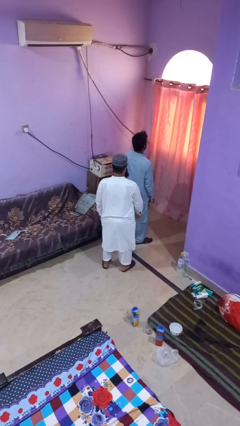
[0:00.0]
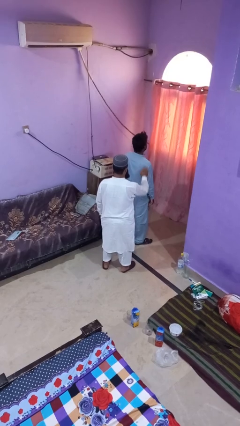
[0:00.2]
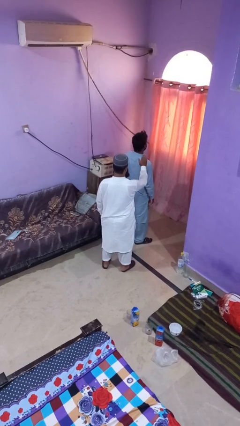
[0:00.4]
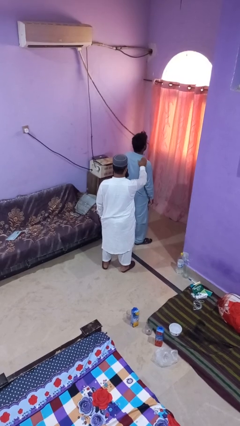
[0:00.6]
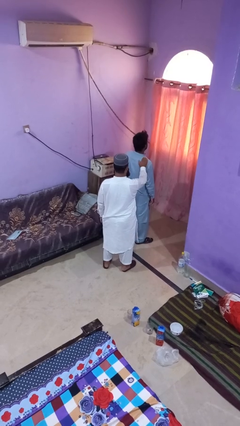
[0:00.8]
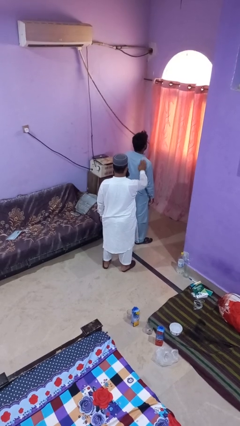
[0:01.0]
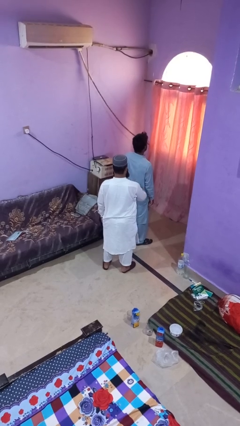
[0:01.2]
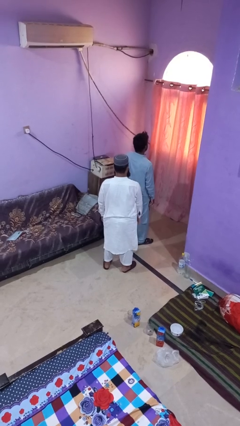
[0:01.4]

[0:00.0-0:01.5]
person pounds shoulders of person

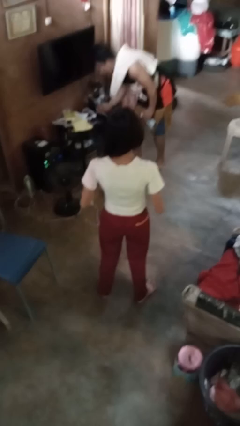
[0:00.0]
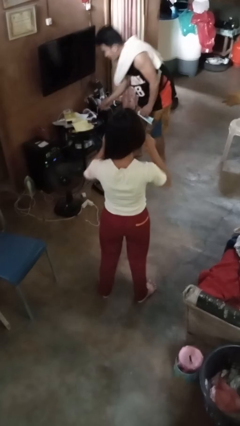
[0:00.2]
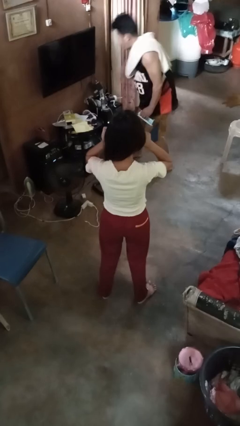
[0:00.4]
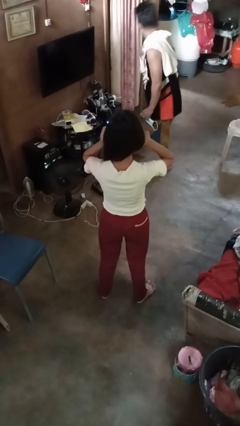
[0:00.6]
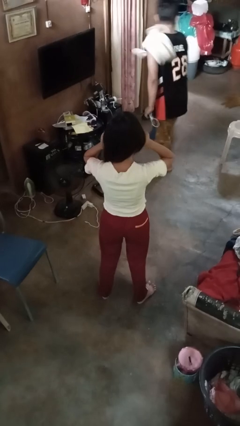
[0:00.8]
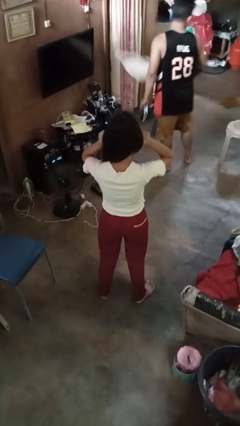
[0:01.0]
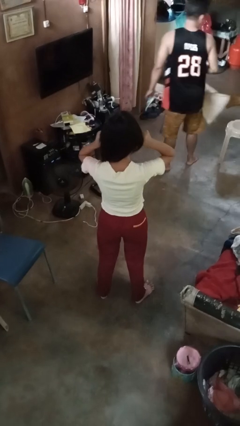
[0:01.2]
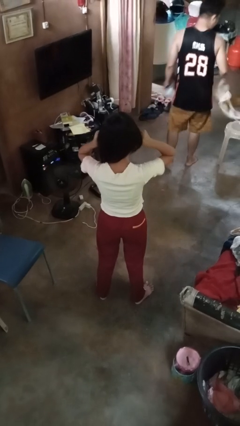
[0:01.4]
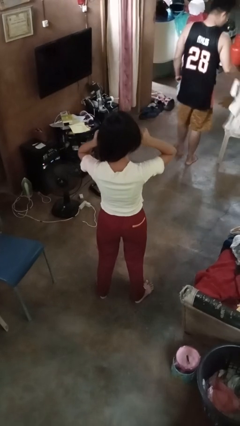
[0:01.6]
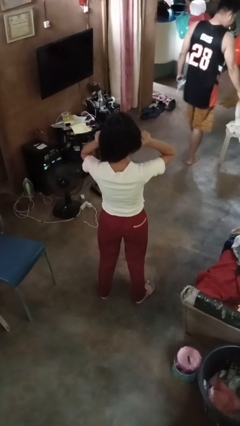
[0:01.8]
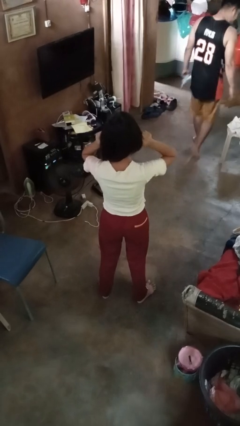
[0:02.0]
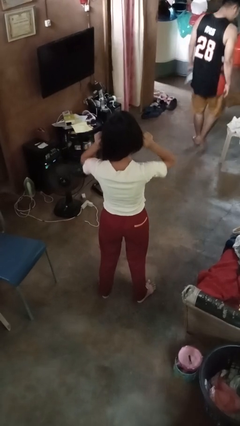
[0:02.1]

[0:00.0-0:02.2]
person touches earlobe

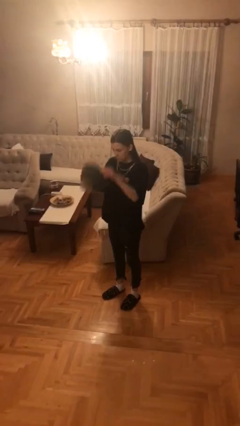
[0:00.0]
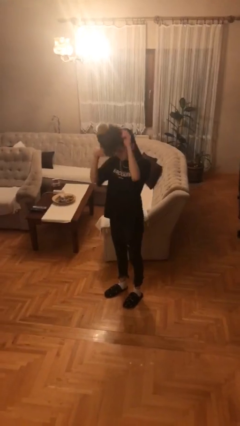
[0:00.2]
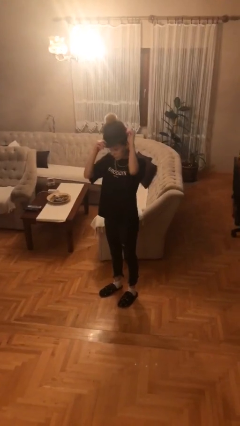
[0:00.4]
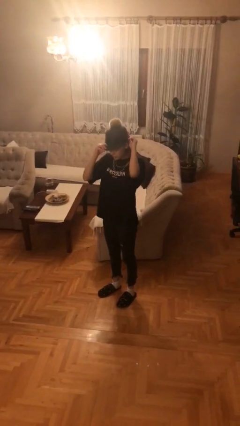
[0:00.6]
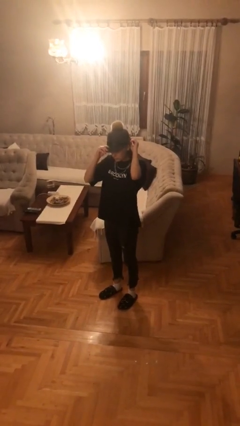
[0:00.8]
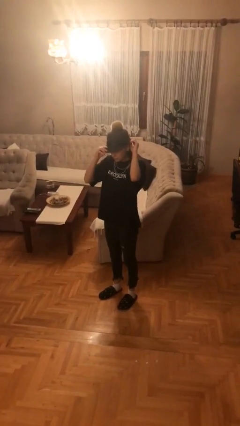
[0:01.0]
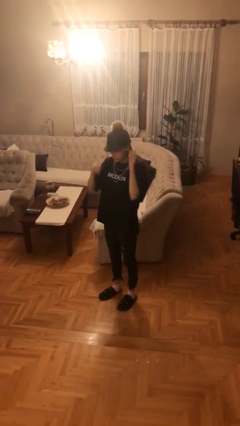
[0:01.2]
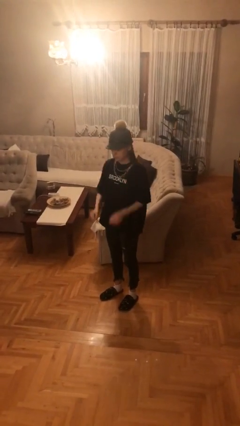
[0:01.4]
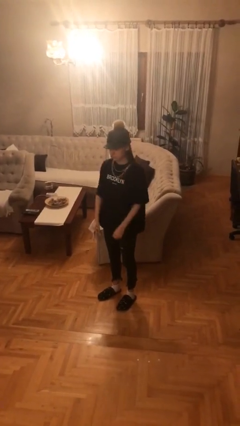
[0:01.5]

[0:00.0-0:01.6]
person puts on hat

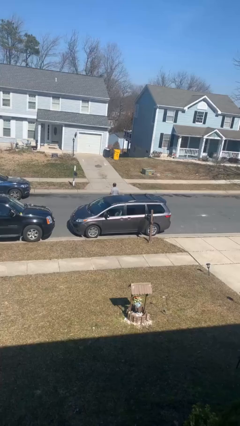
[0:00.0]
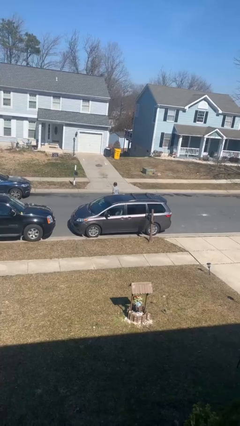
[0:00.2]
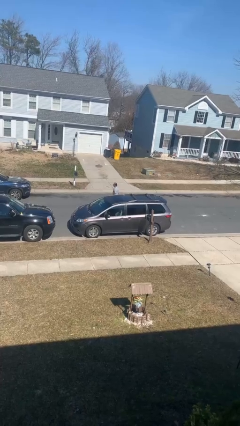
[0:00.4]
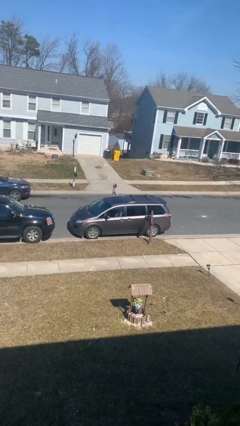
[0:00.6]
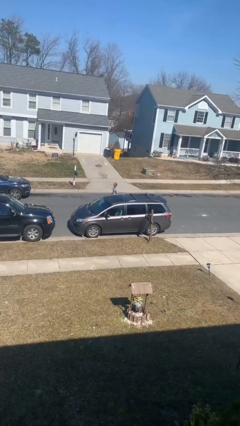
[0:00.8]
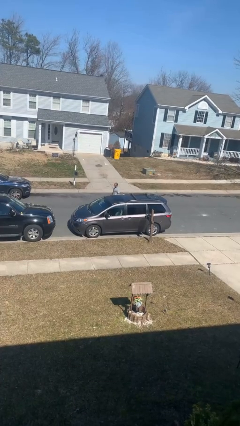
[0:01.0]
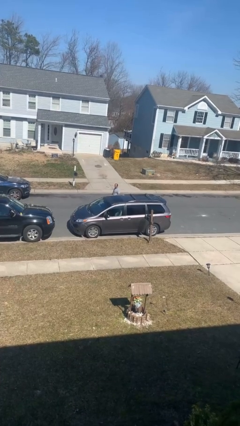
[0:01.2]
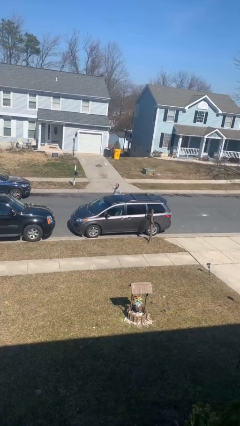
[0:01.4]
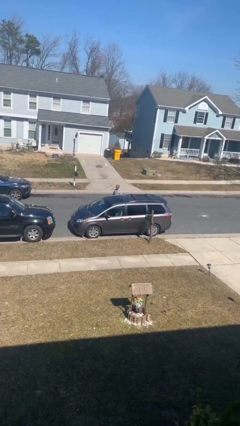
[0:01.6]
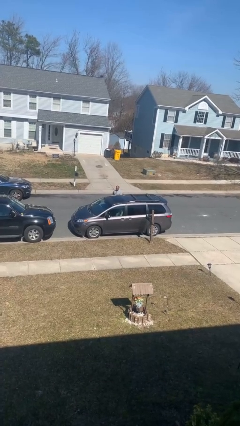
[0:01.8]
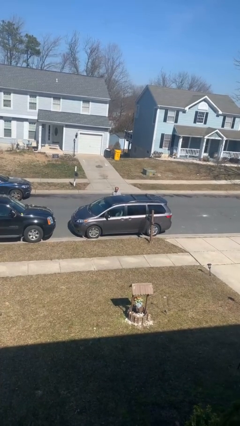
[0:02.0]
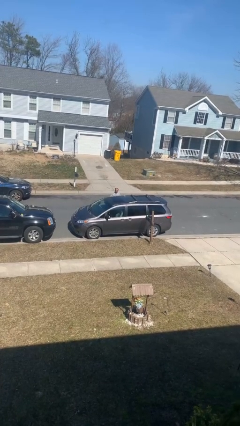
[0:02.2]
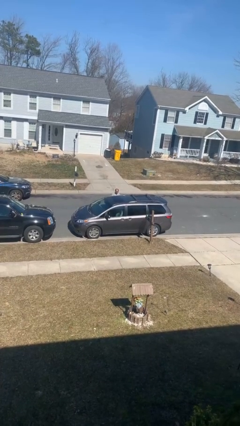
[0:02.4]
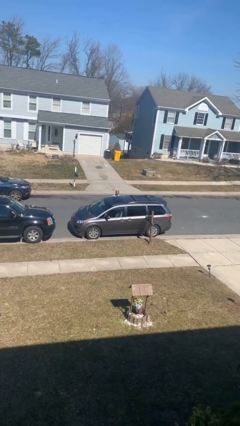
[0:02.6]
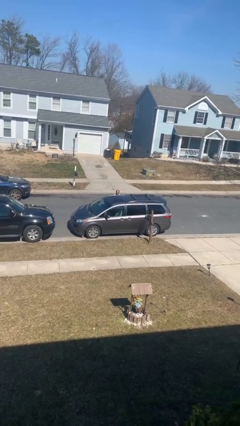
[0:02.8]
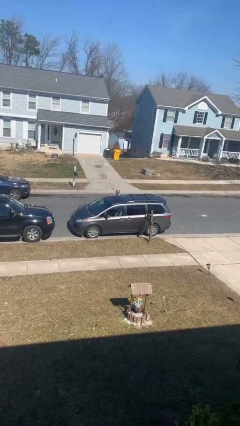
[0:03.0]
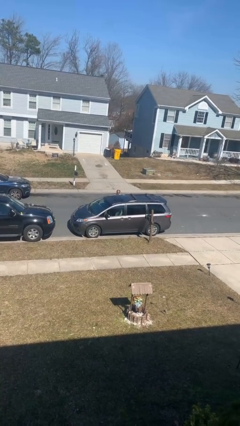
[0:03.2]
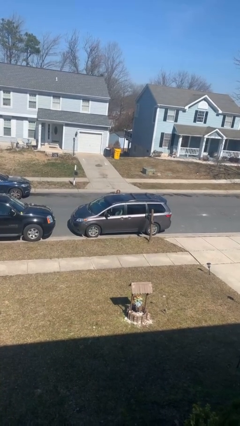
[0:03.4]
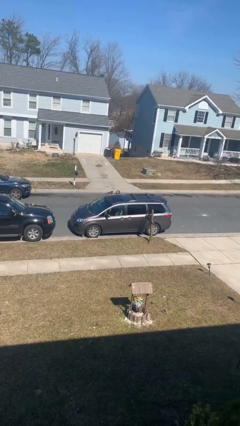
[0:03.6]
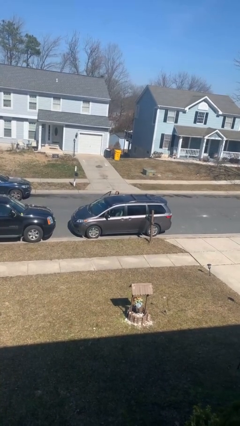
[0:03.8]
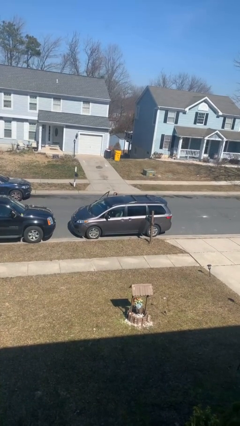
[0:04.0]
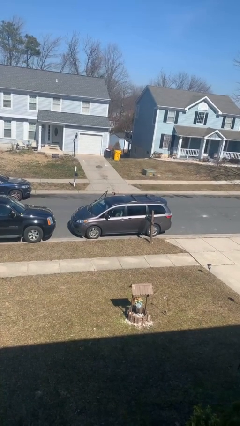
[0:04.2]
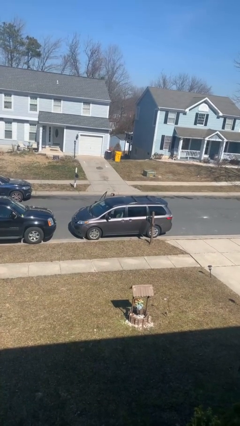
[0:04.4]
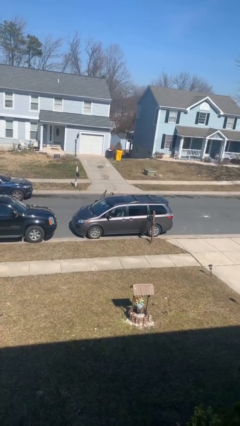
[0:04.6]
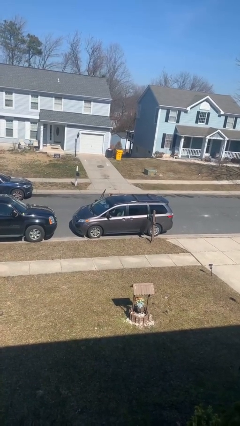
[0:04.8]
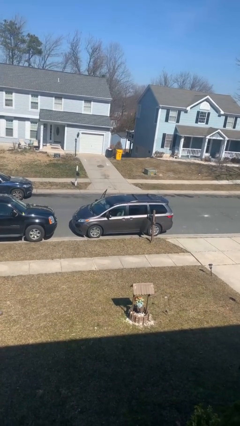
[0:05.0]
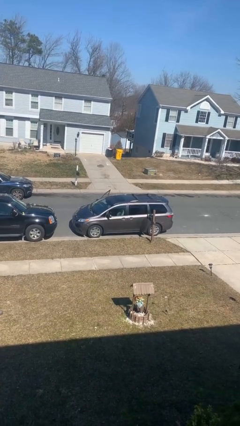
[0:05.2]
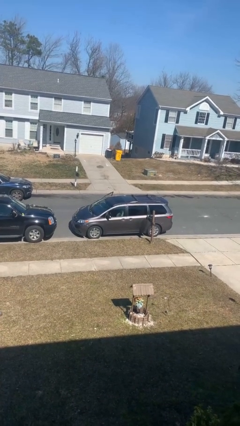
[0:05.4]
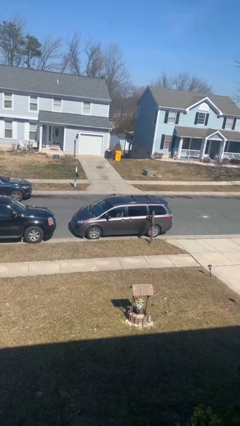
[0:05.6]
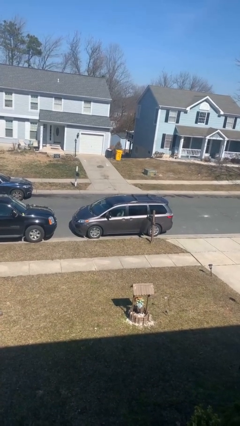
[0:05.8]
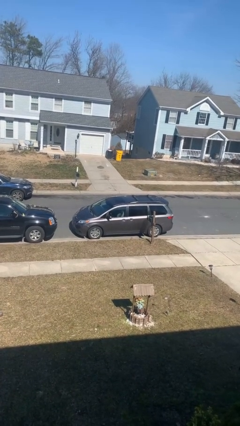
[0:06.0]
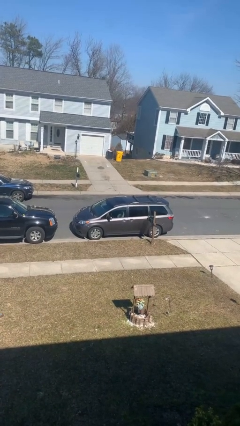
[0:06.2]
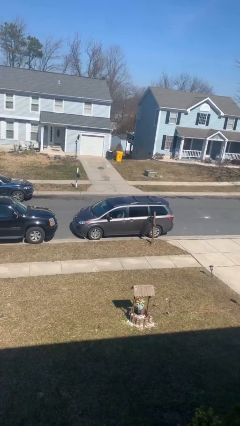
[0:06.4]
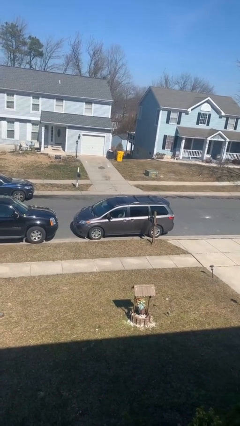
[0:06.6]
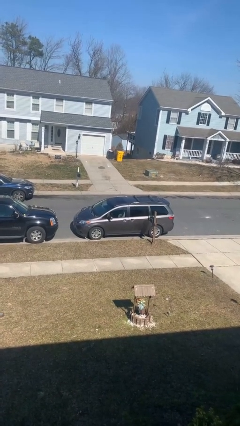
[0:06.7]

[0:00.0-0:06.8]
car picks up person

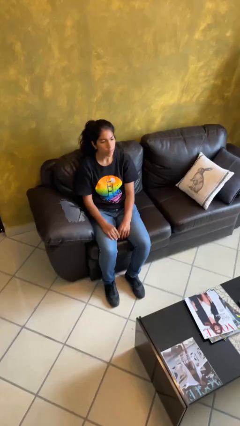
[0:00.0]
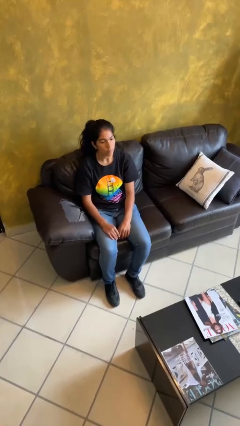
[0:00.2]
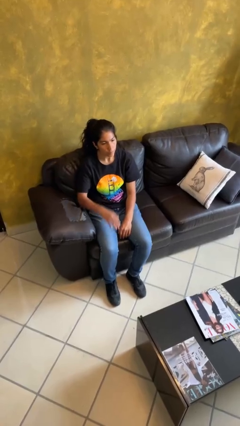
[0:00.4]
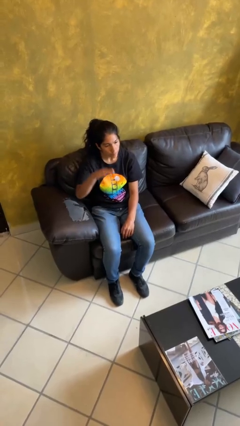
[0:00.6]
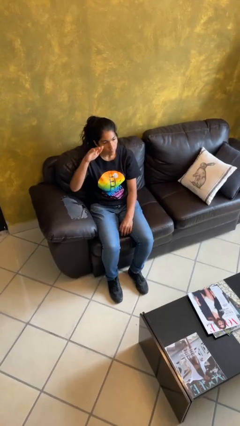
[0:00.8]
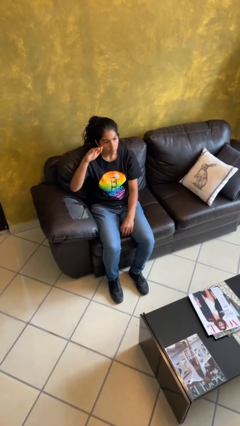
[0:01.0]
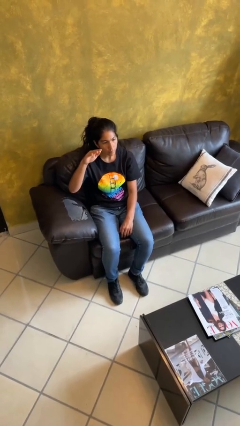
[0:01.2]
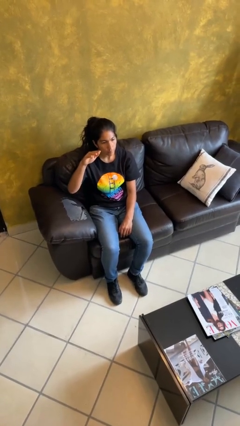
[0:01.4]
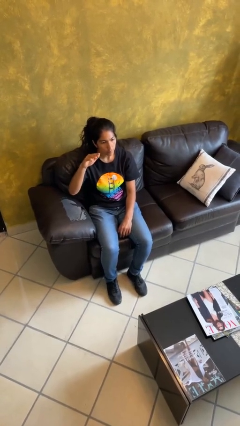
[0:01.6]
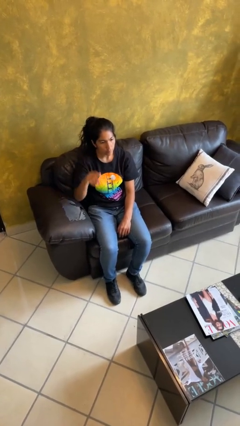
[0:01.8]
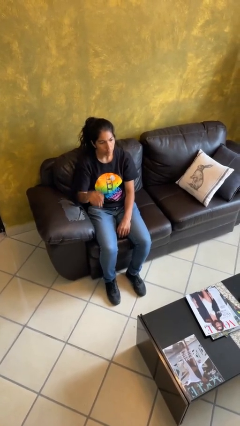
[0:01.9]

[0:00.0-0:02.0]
person gestures swipe up

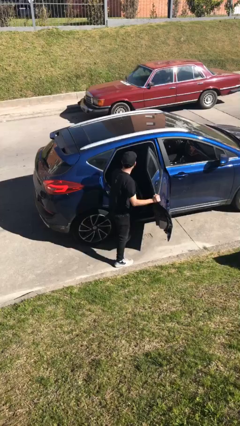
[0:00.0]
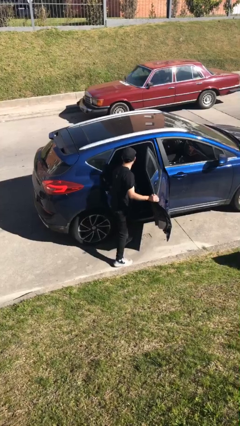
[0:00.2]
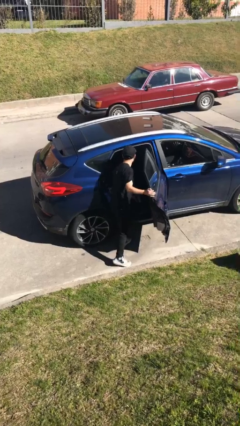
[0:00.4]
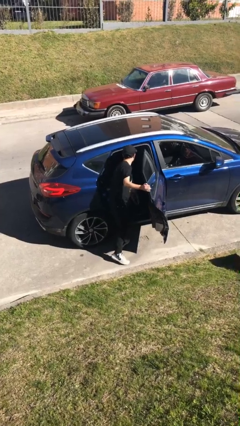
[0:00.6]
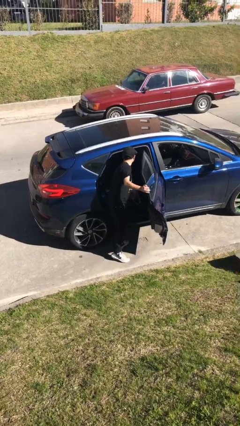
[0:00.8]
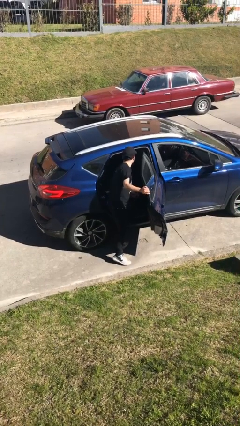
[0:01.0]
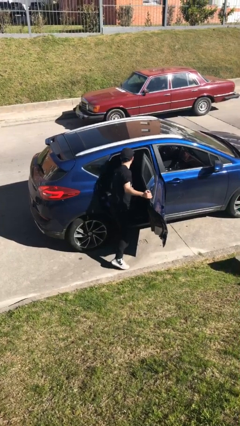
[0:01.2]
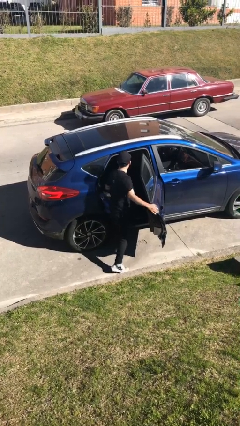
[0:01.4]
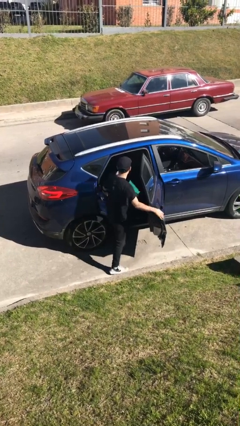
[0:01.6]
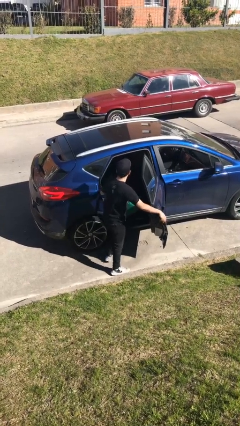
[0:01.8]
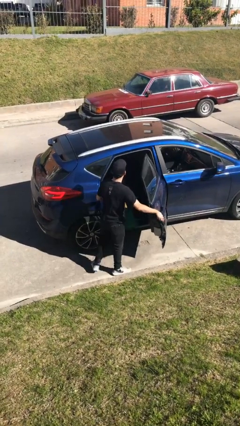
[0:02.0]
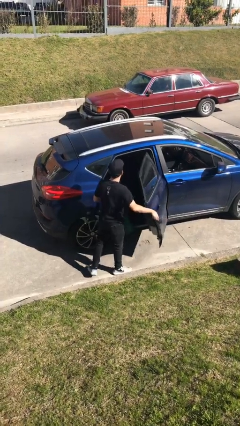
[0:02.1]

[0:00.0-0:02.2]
person unloads car

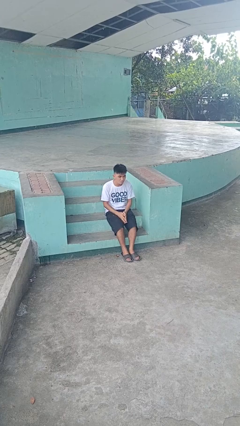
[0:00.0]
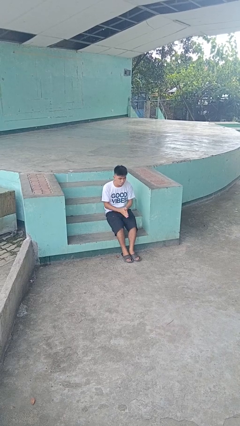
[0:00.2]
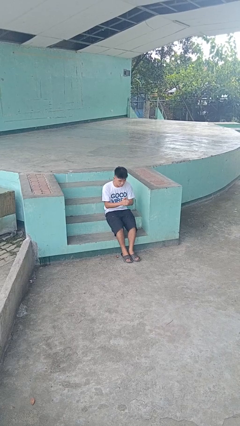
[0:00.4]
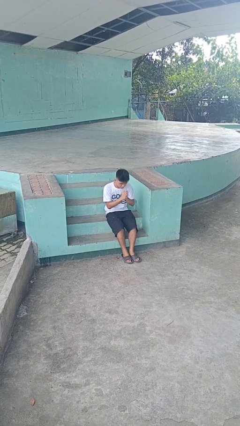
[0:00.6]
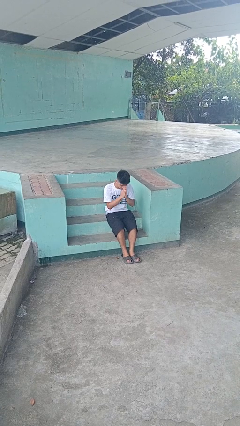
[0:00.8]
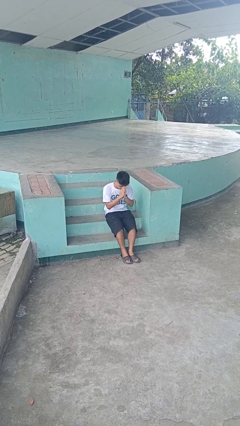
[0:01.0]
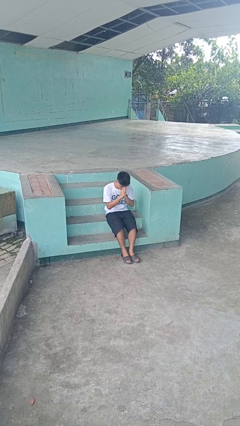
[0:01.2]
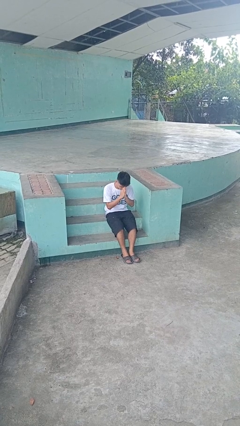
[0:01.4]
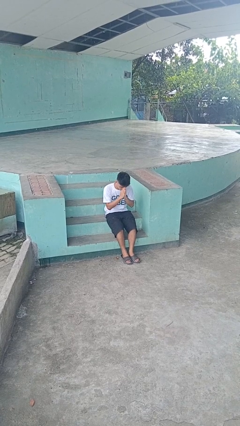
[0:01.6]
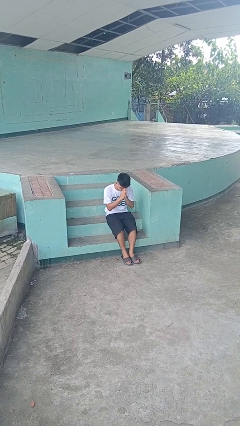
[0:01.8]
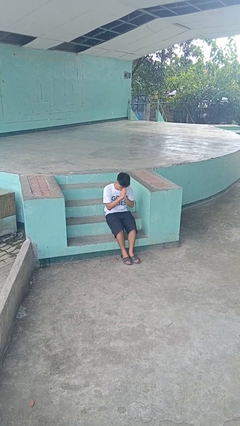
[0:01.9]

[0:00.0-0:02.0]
person prays
